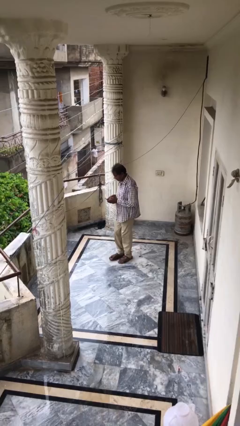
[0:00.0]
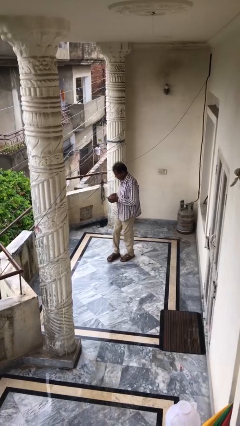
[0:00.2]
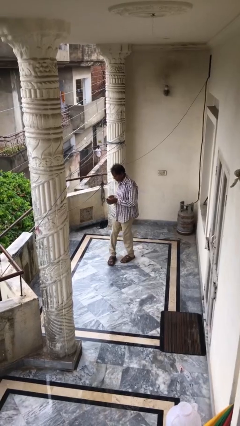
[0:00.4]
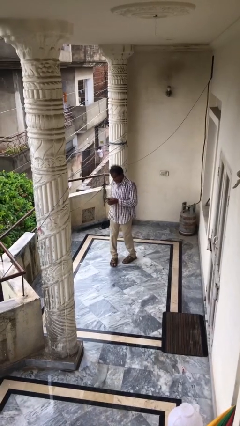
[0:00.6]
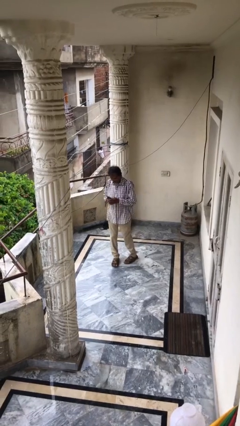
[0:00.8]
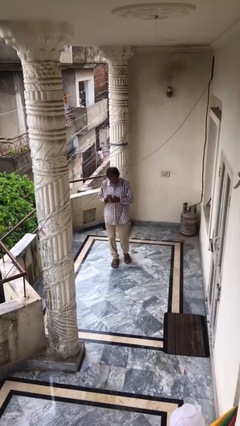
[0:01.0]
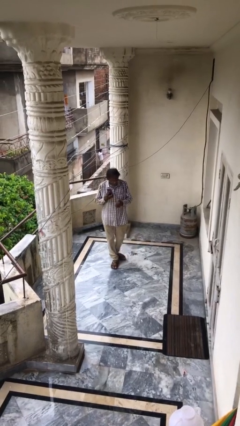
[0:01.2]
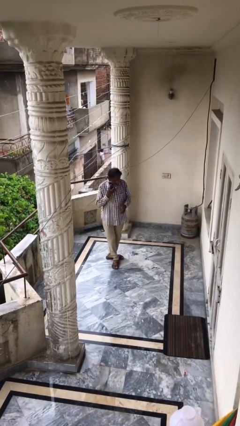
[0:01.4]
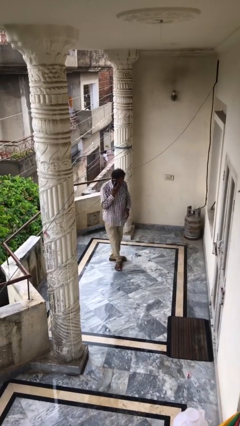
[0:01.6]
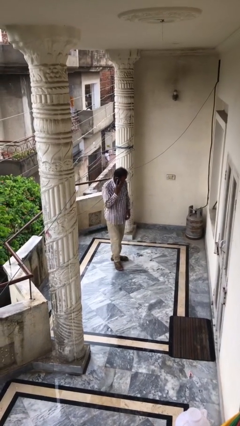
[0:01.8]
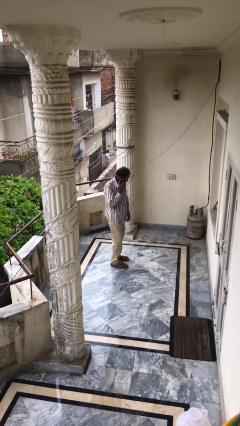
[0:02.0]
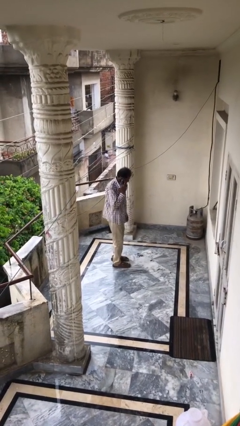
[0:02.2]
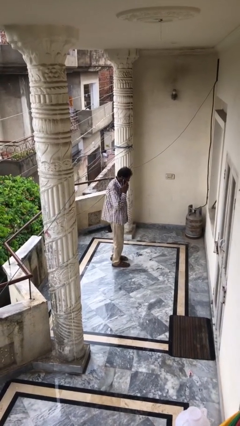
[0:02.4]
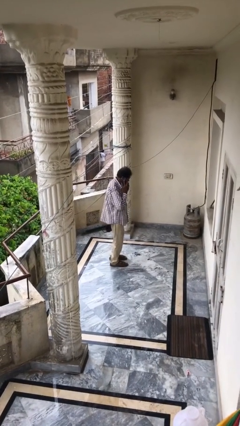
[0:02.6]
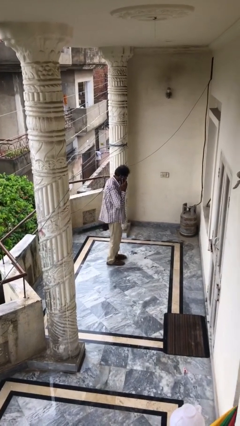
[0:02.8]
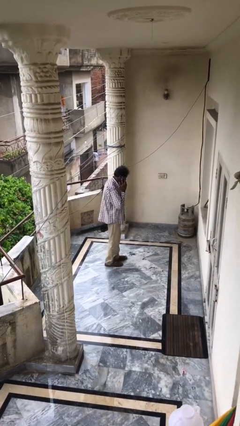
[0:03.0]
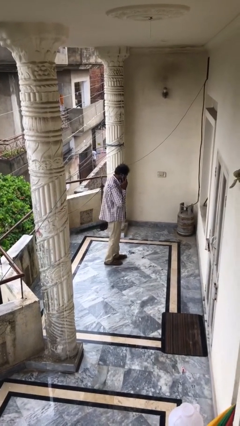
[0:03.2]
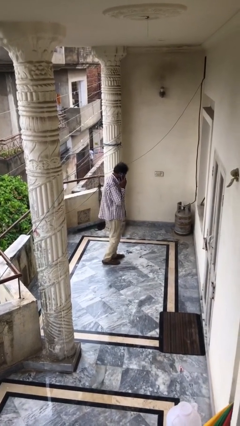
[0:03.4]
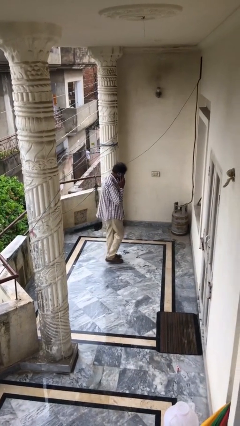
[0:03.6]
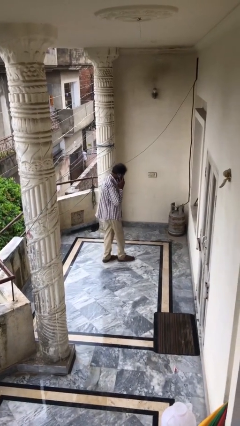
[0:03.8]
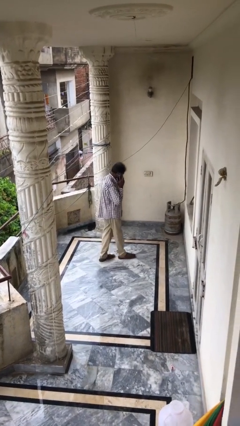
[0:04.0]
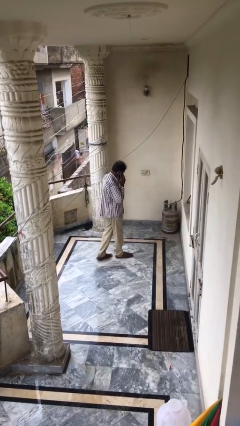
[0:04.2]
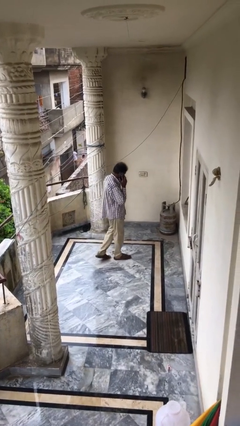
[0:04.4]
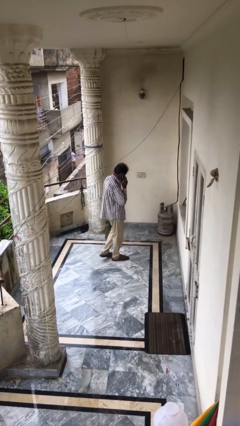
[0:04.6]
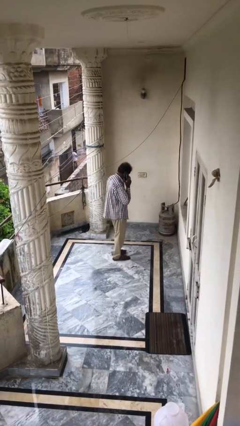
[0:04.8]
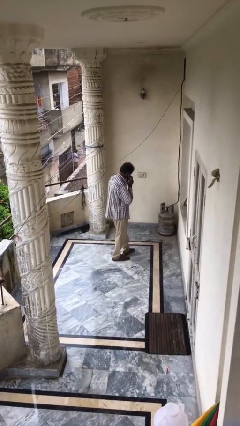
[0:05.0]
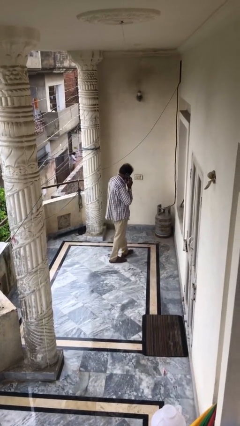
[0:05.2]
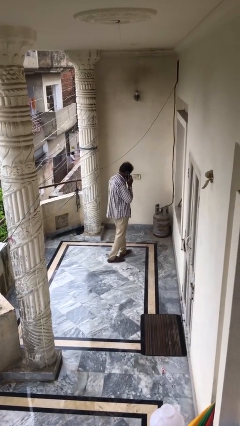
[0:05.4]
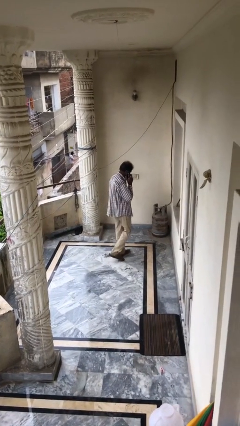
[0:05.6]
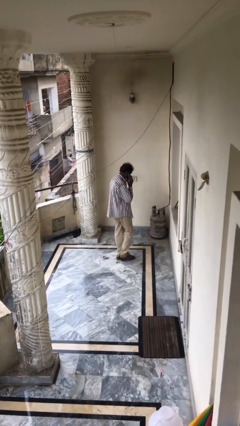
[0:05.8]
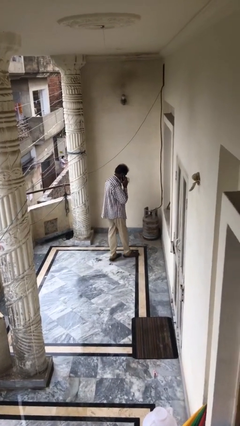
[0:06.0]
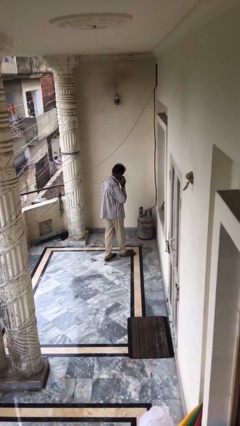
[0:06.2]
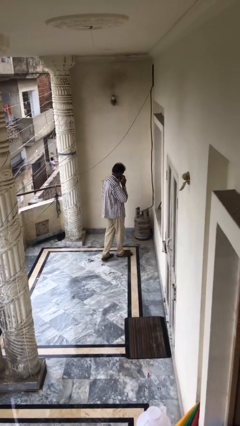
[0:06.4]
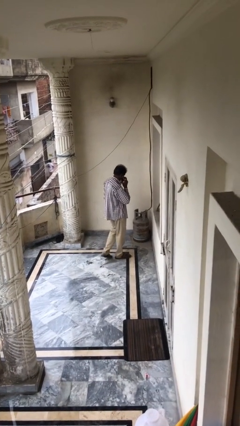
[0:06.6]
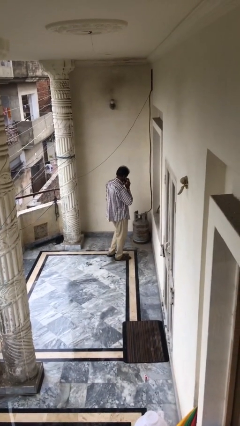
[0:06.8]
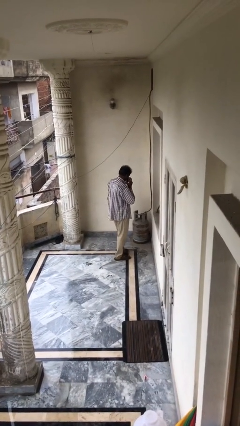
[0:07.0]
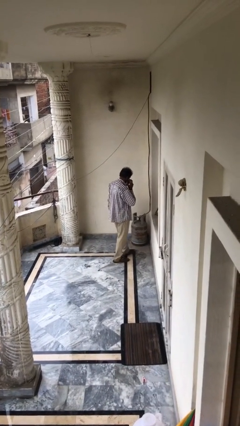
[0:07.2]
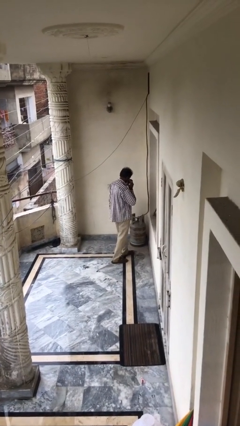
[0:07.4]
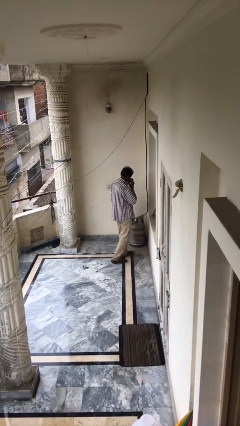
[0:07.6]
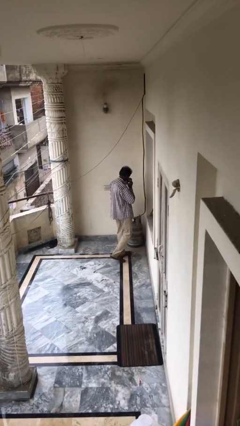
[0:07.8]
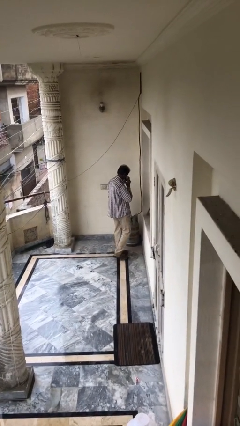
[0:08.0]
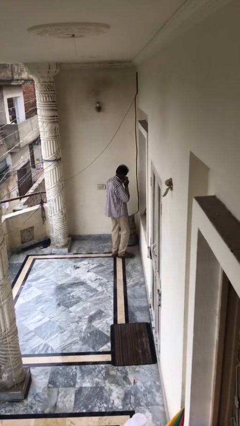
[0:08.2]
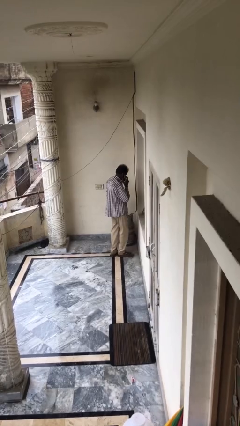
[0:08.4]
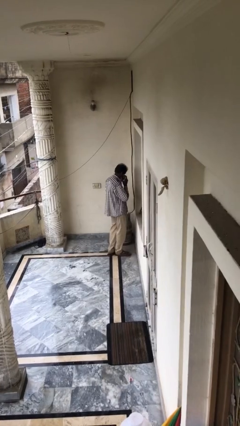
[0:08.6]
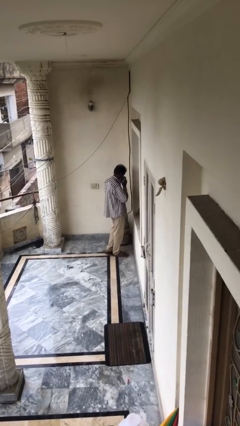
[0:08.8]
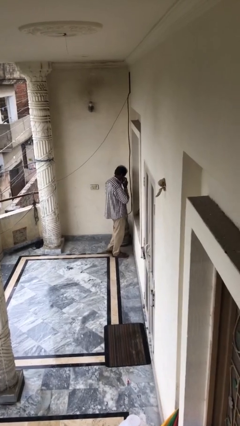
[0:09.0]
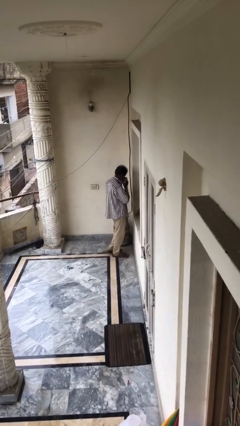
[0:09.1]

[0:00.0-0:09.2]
person talks on phone

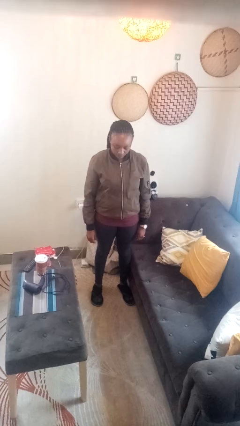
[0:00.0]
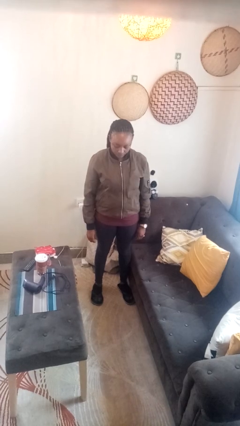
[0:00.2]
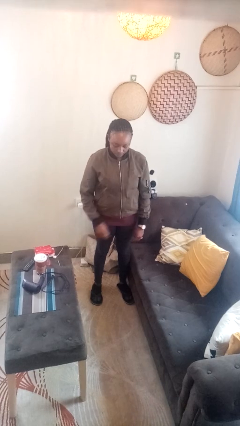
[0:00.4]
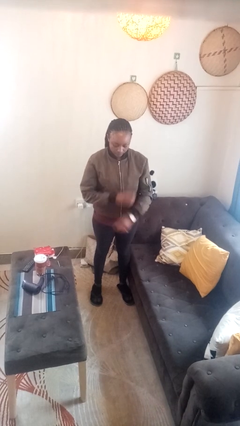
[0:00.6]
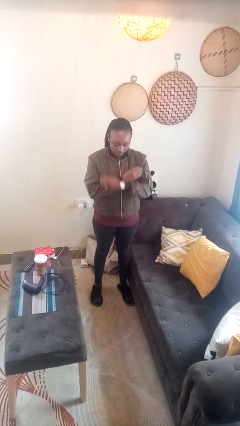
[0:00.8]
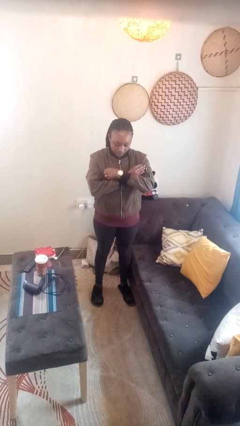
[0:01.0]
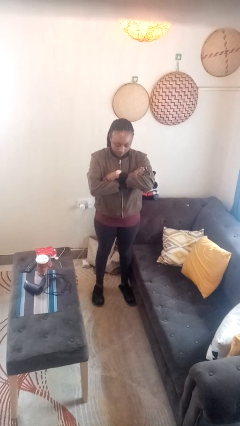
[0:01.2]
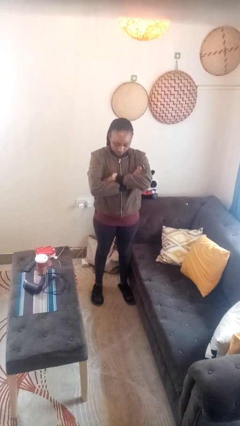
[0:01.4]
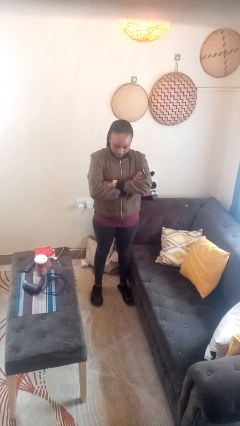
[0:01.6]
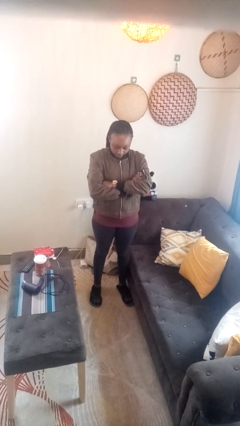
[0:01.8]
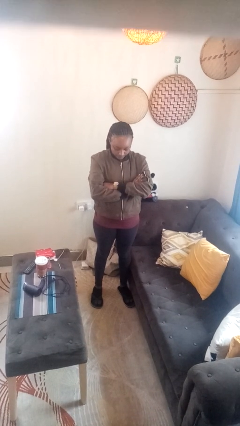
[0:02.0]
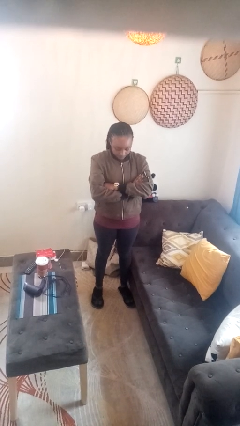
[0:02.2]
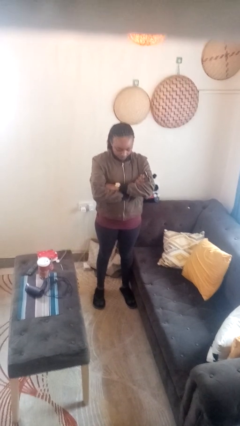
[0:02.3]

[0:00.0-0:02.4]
person gestures arms x

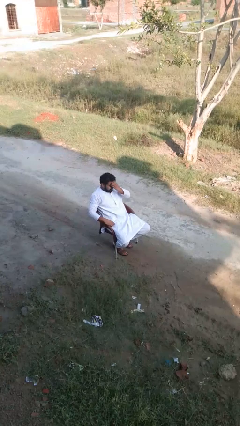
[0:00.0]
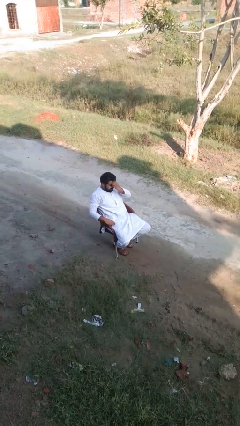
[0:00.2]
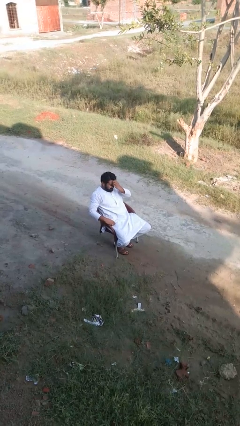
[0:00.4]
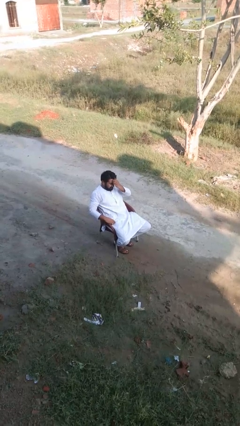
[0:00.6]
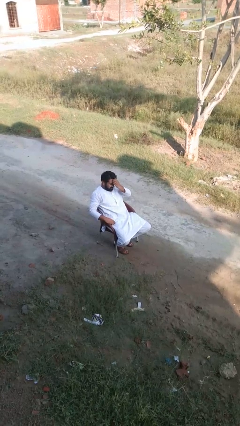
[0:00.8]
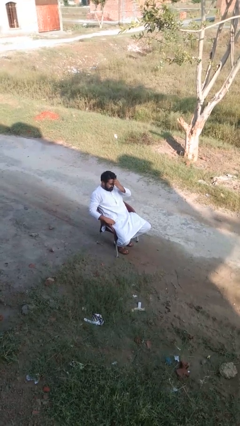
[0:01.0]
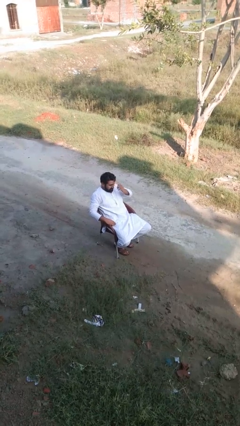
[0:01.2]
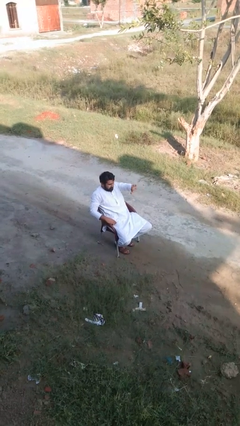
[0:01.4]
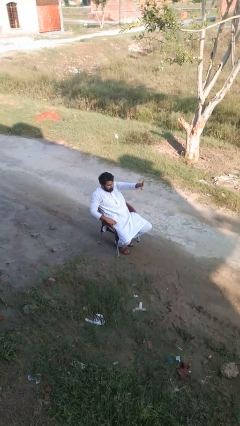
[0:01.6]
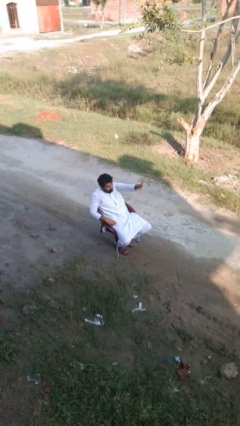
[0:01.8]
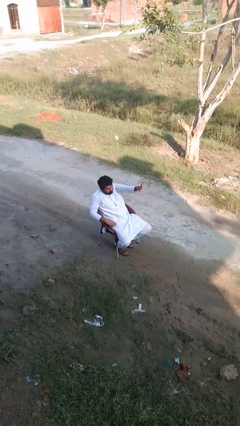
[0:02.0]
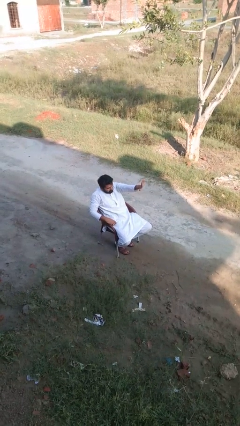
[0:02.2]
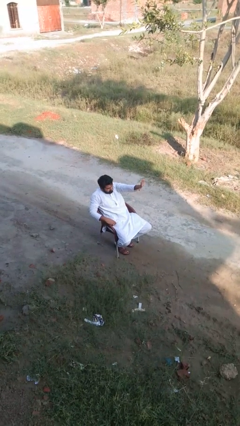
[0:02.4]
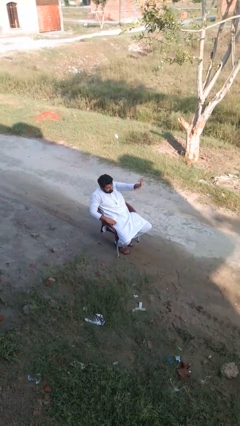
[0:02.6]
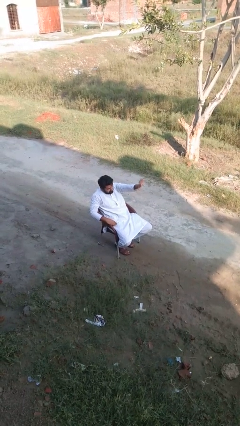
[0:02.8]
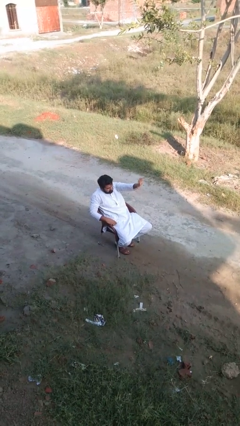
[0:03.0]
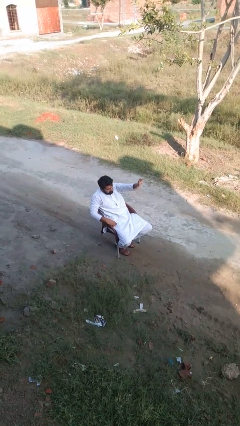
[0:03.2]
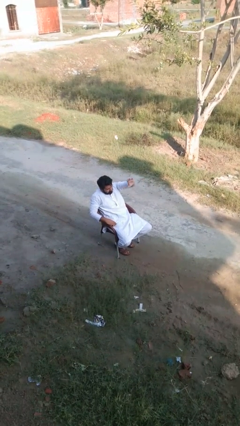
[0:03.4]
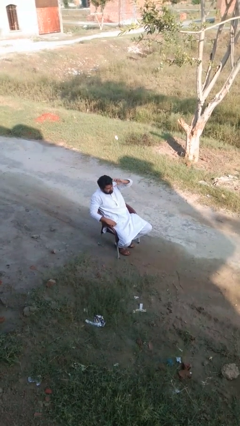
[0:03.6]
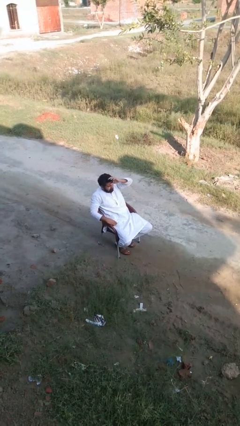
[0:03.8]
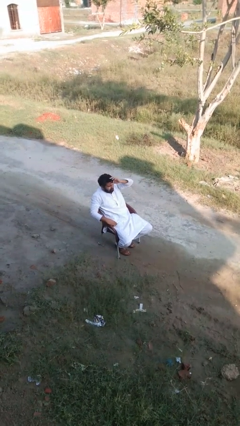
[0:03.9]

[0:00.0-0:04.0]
person gestures stop

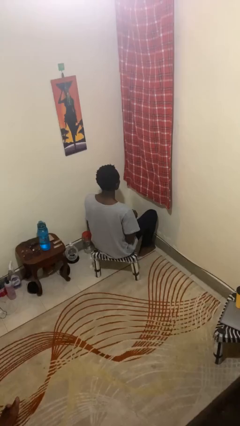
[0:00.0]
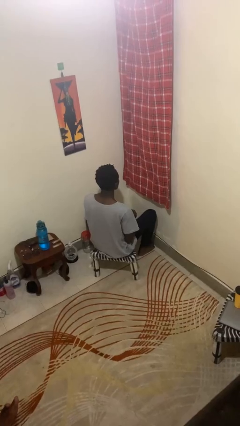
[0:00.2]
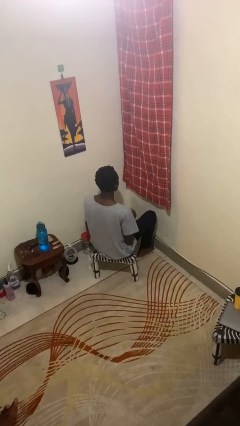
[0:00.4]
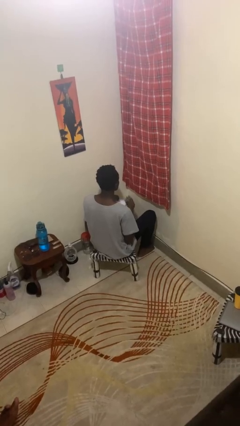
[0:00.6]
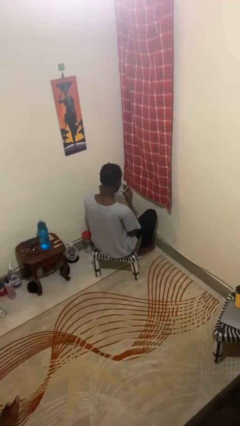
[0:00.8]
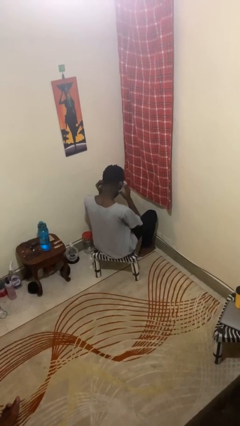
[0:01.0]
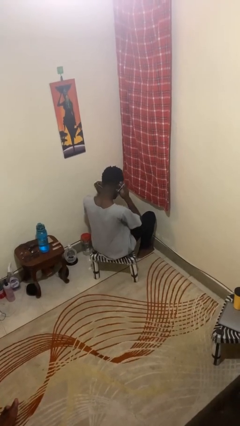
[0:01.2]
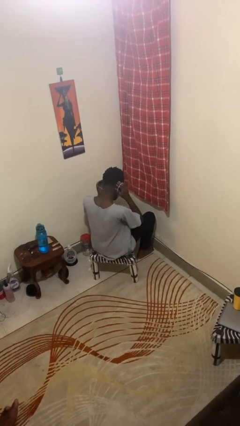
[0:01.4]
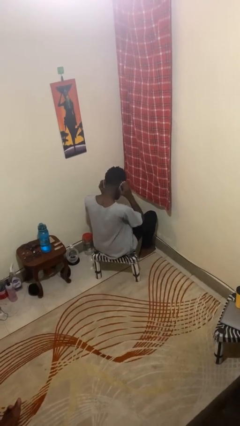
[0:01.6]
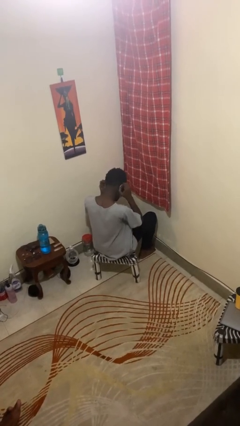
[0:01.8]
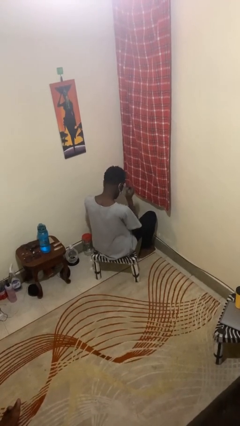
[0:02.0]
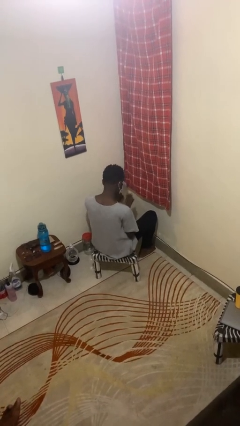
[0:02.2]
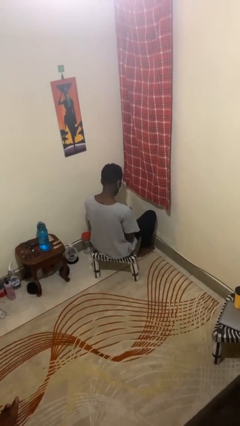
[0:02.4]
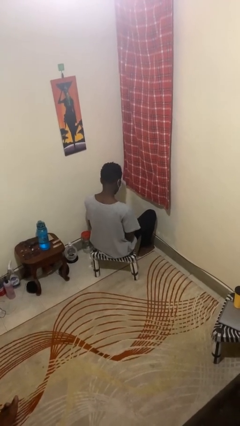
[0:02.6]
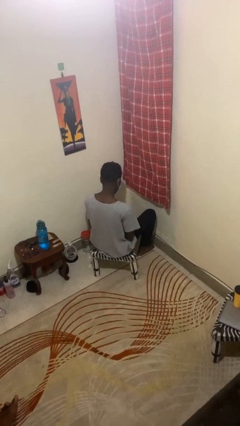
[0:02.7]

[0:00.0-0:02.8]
person puts on facemask
